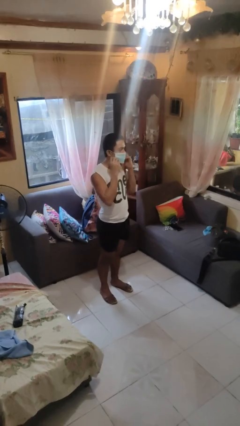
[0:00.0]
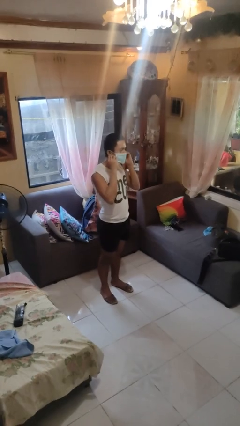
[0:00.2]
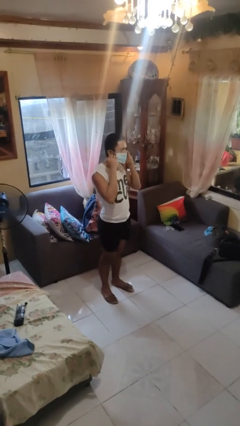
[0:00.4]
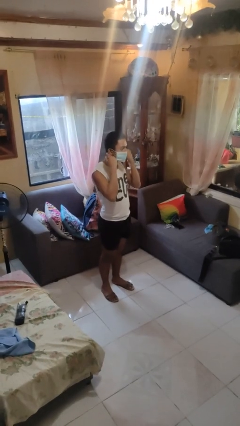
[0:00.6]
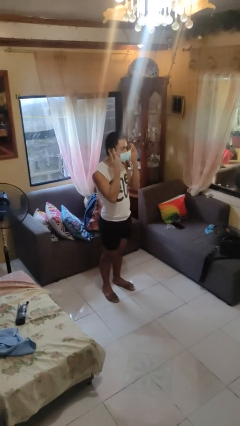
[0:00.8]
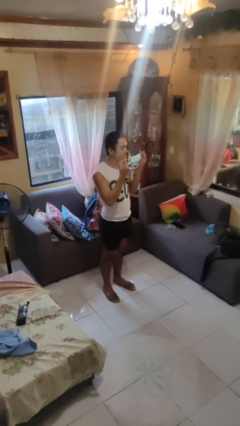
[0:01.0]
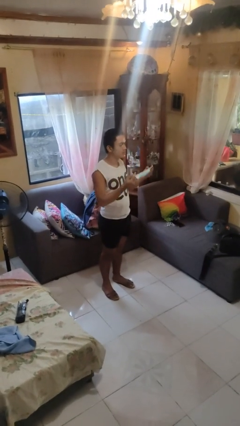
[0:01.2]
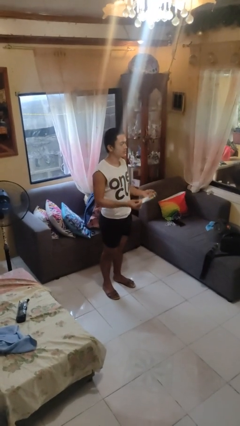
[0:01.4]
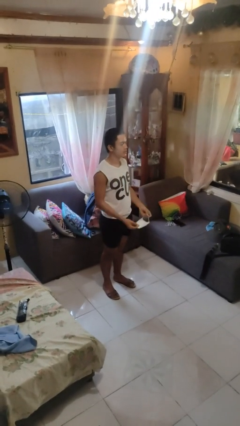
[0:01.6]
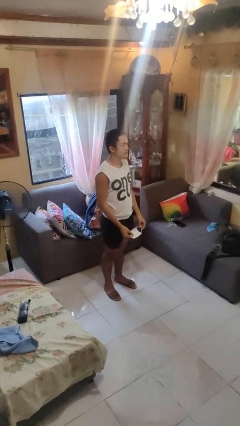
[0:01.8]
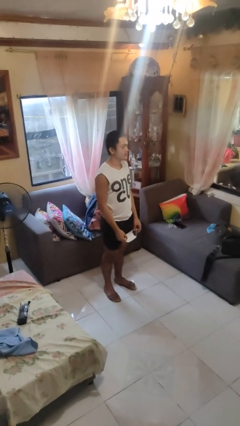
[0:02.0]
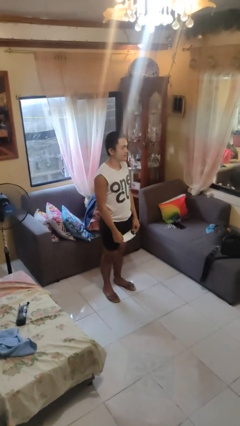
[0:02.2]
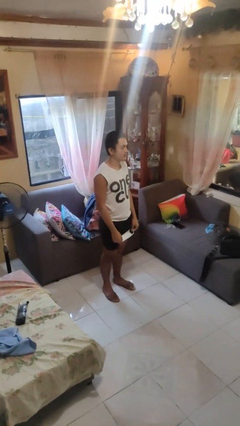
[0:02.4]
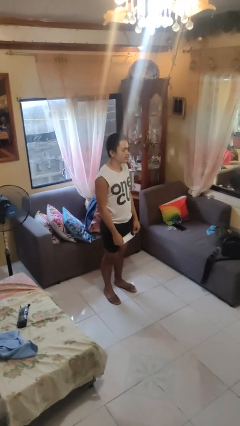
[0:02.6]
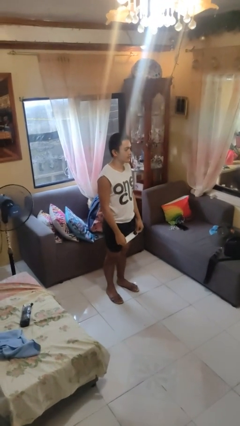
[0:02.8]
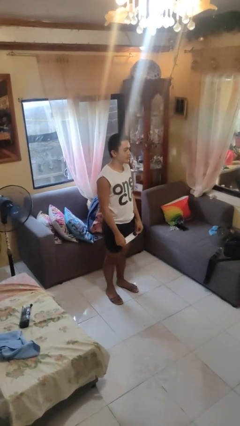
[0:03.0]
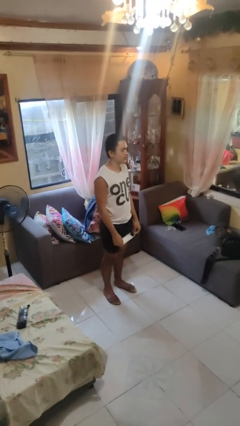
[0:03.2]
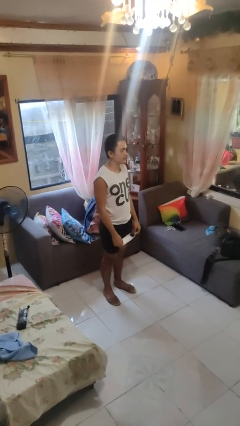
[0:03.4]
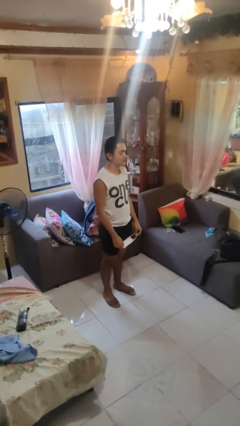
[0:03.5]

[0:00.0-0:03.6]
person takes off facemask

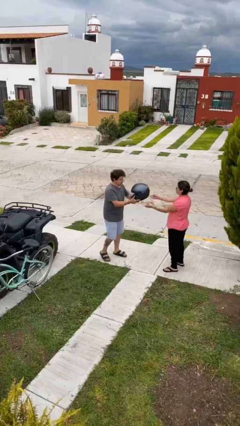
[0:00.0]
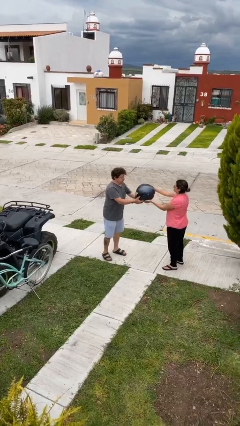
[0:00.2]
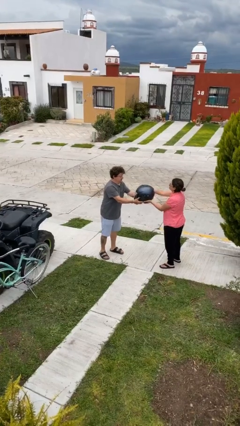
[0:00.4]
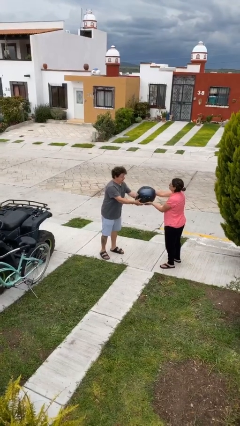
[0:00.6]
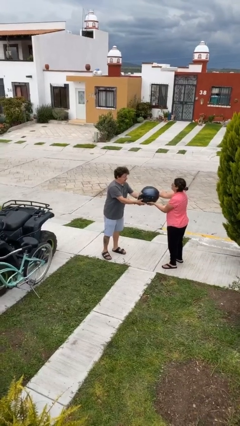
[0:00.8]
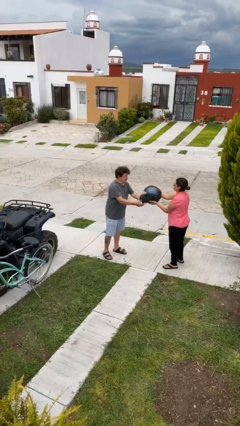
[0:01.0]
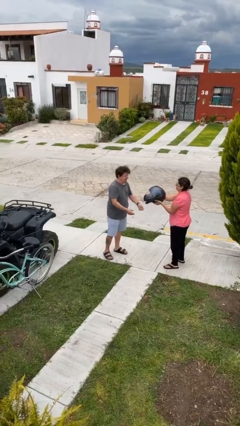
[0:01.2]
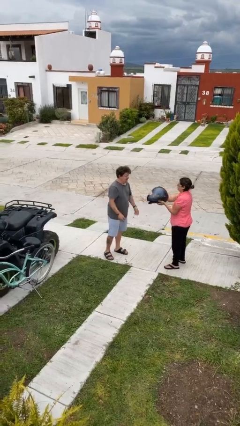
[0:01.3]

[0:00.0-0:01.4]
person transfers object to person

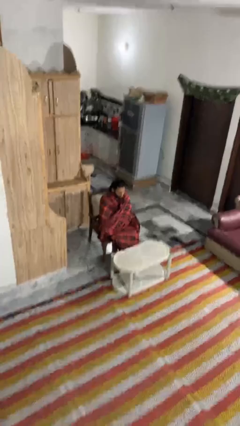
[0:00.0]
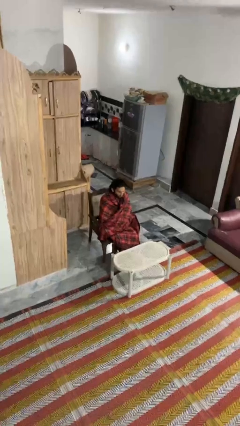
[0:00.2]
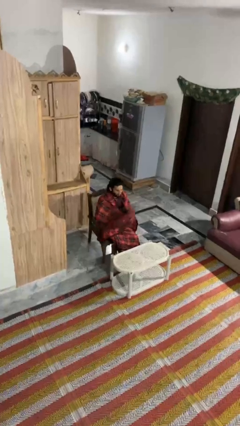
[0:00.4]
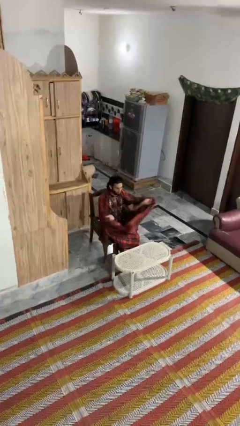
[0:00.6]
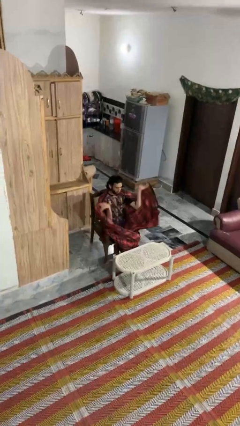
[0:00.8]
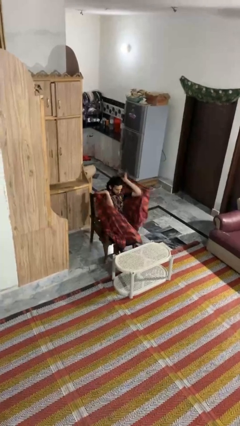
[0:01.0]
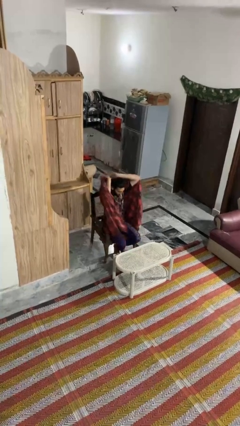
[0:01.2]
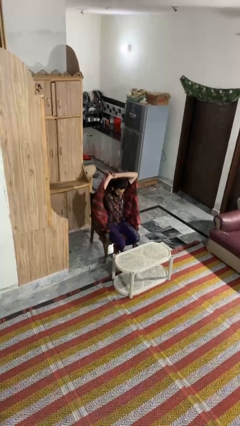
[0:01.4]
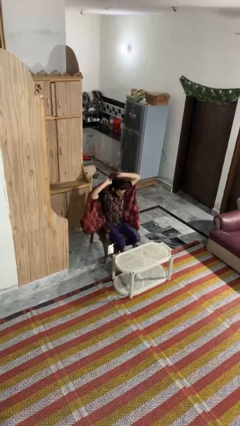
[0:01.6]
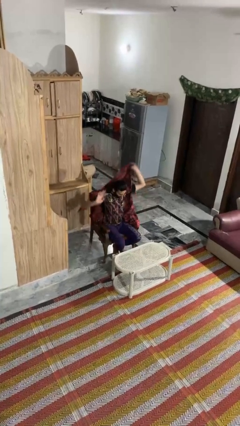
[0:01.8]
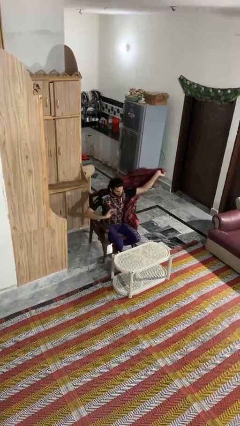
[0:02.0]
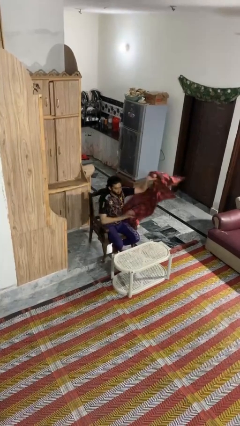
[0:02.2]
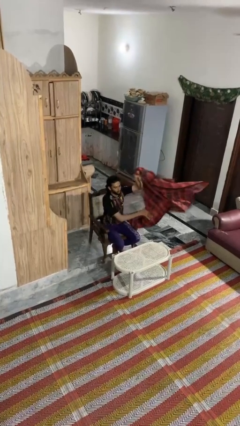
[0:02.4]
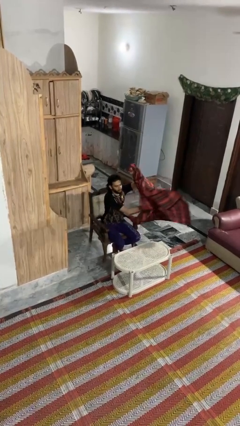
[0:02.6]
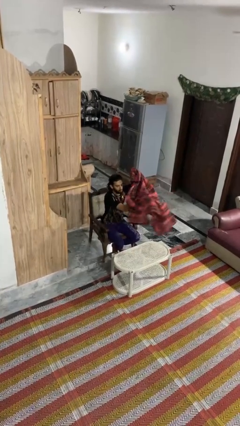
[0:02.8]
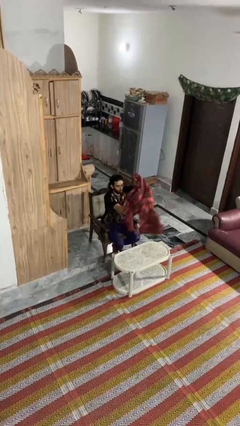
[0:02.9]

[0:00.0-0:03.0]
person uncovers with blanket

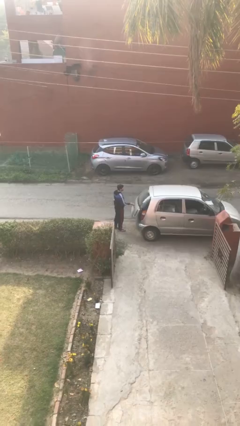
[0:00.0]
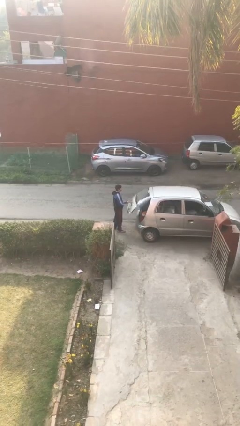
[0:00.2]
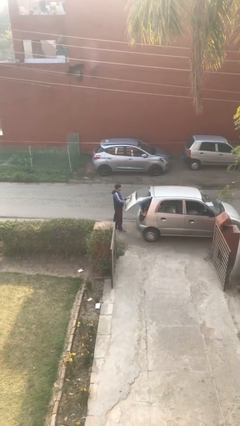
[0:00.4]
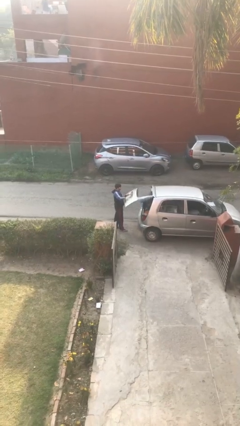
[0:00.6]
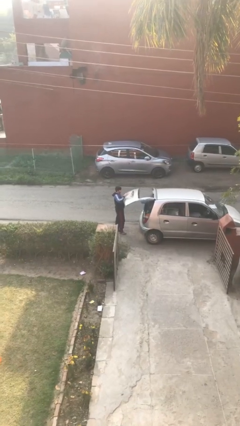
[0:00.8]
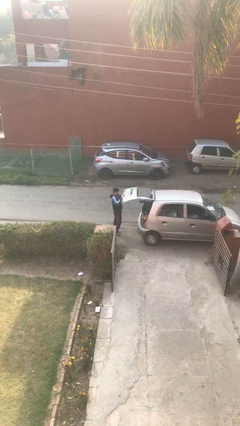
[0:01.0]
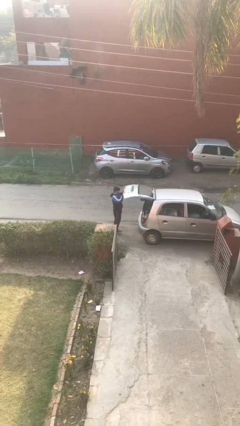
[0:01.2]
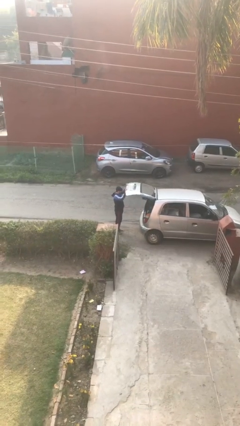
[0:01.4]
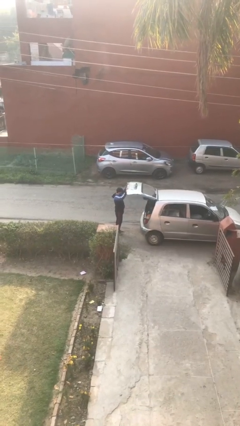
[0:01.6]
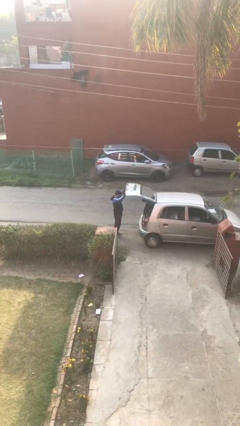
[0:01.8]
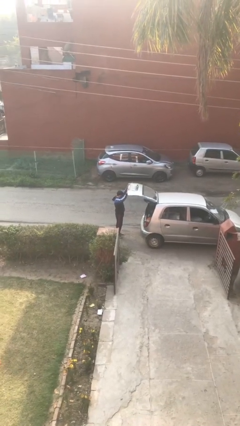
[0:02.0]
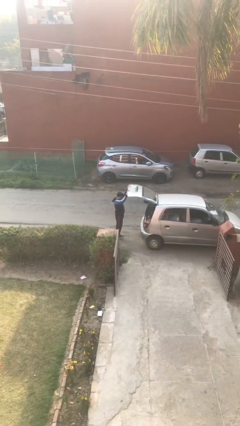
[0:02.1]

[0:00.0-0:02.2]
person opens car trunk

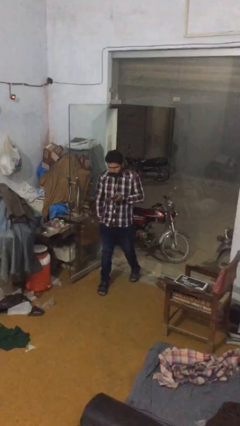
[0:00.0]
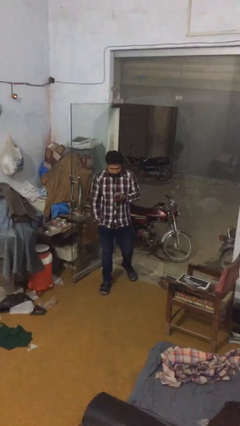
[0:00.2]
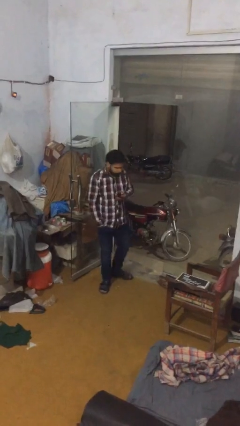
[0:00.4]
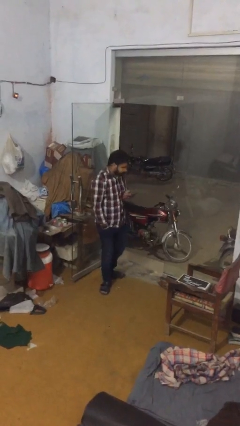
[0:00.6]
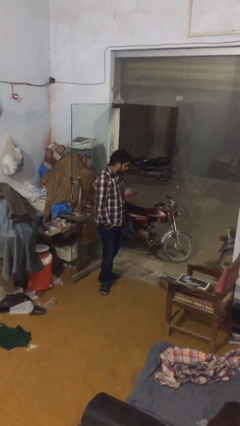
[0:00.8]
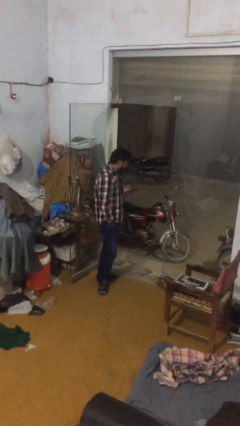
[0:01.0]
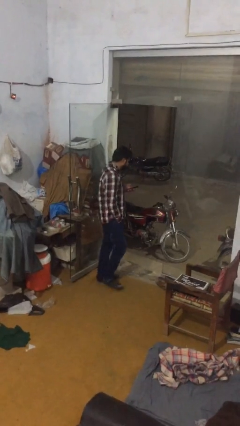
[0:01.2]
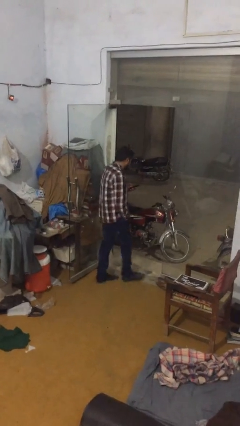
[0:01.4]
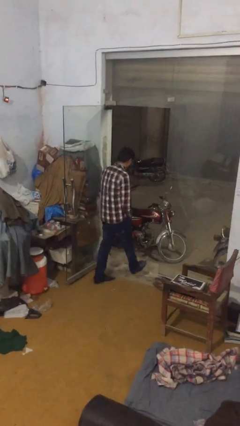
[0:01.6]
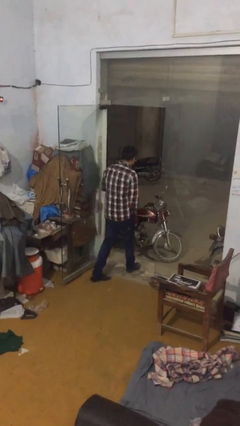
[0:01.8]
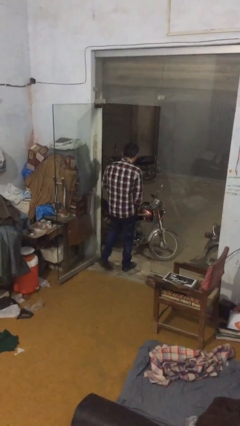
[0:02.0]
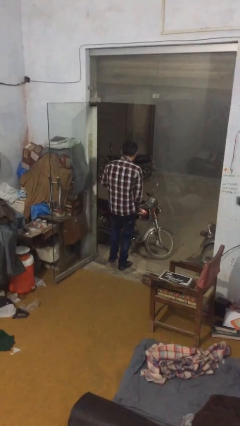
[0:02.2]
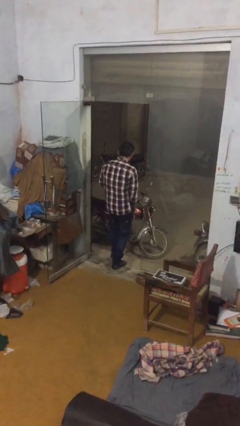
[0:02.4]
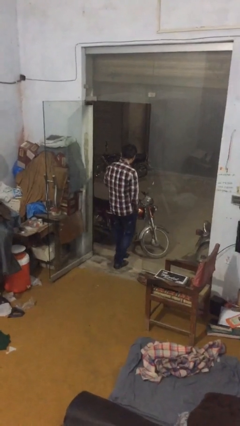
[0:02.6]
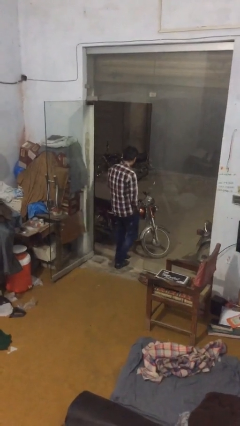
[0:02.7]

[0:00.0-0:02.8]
person exits scene through structure

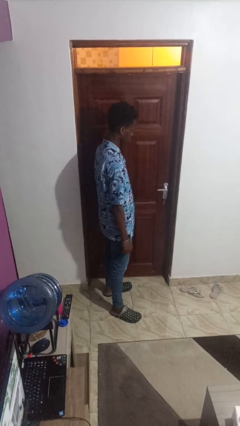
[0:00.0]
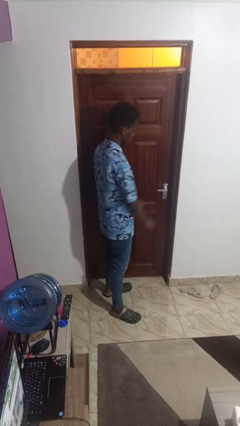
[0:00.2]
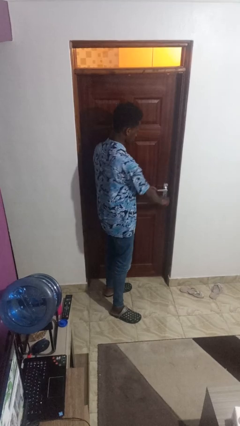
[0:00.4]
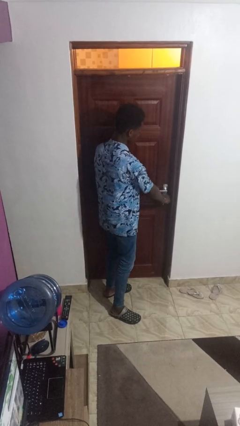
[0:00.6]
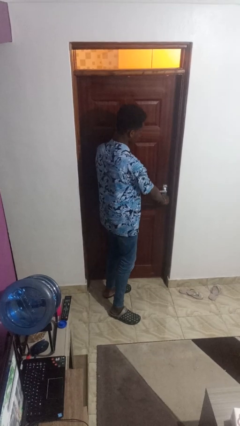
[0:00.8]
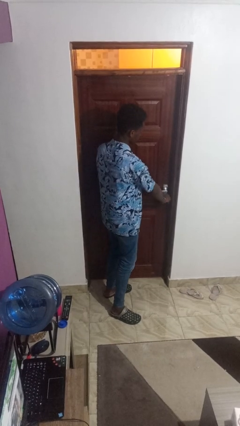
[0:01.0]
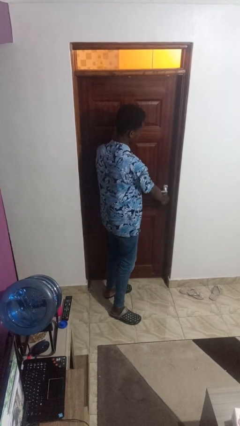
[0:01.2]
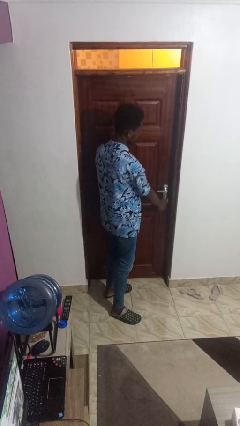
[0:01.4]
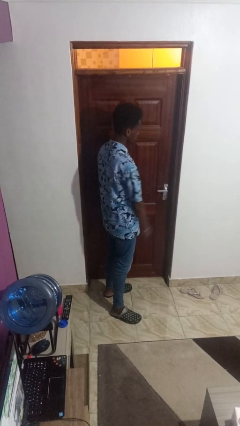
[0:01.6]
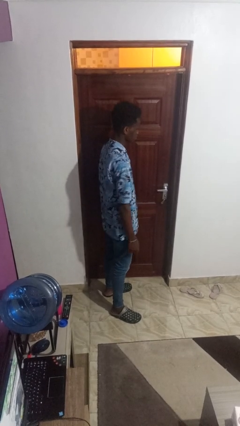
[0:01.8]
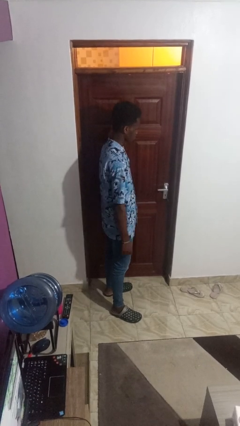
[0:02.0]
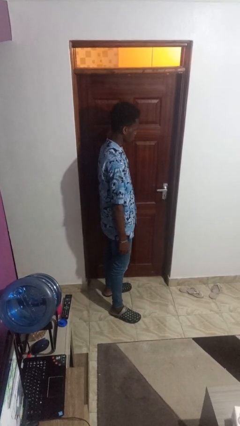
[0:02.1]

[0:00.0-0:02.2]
person locks door with keys

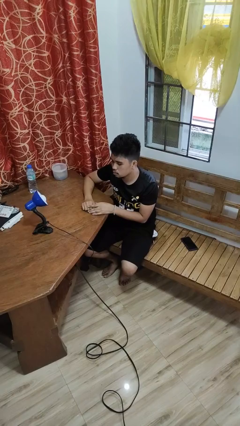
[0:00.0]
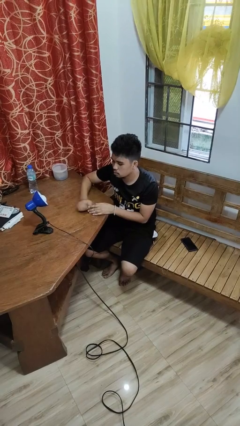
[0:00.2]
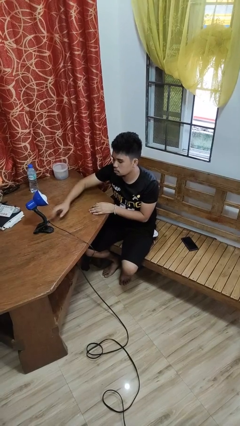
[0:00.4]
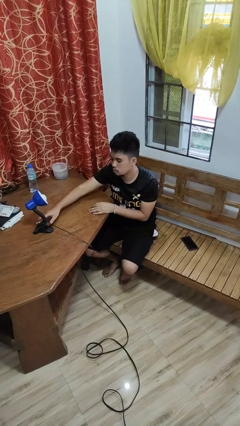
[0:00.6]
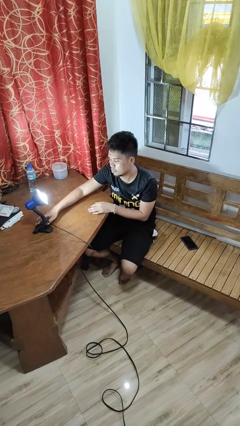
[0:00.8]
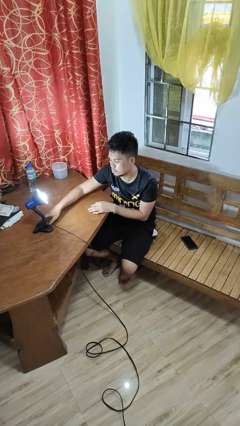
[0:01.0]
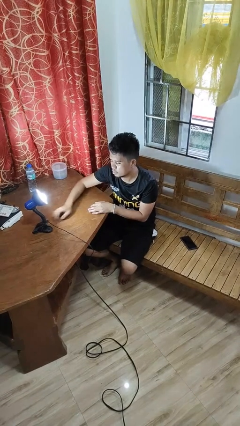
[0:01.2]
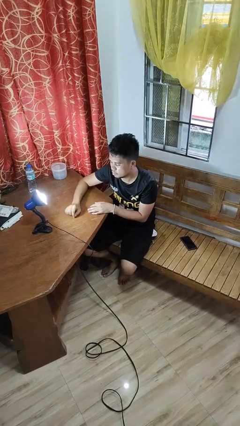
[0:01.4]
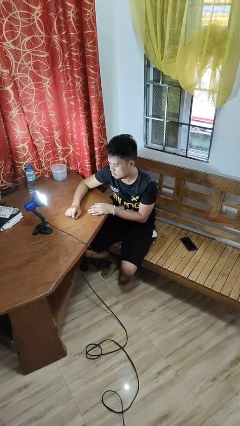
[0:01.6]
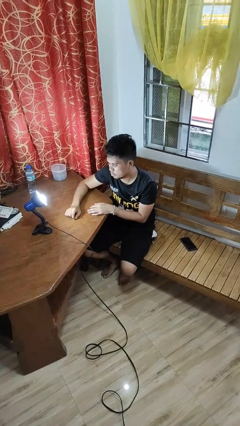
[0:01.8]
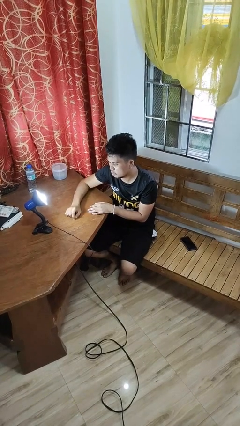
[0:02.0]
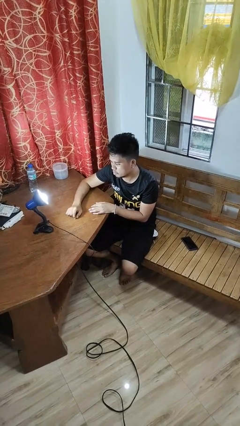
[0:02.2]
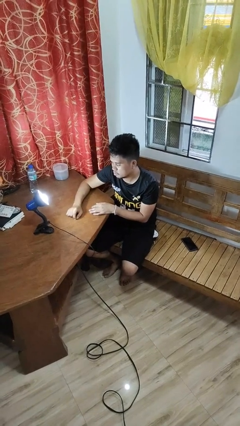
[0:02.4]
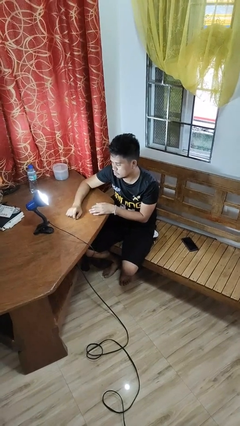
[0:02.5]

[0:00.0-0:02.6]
person turns on lamp
